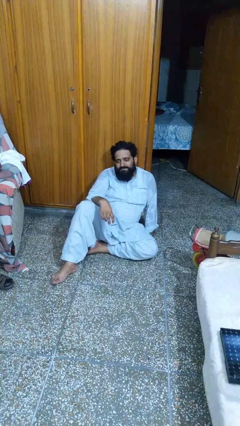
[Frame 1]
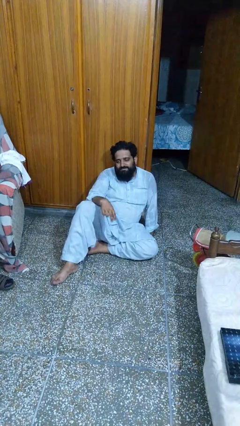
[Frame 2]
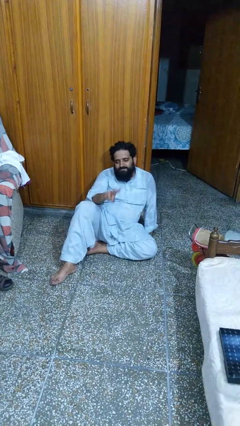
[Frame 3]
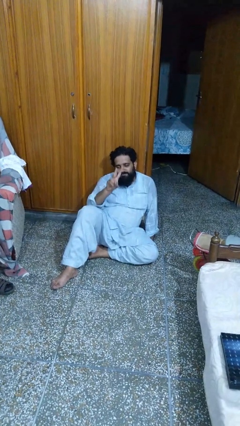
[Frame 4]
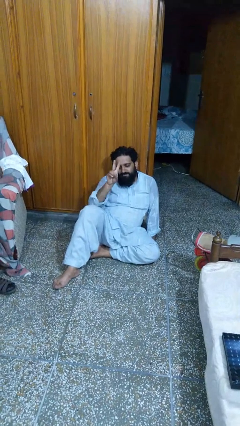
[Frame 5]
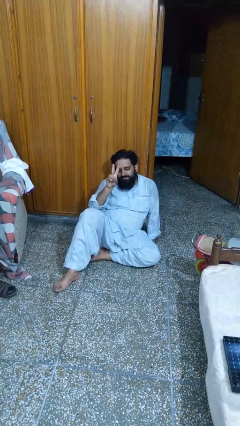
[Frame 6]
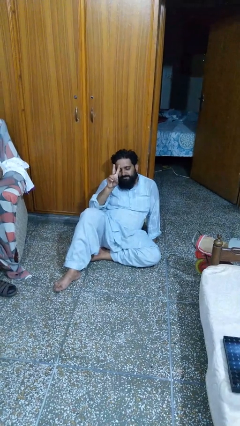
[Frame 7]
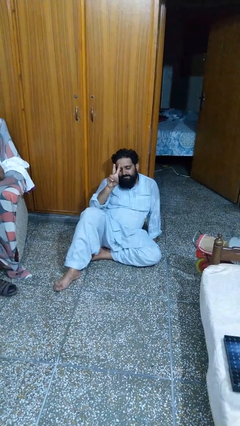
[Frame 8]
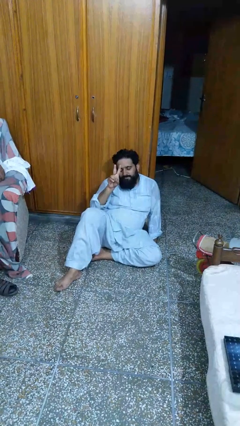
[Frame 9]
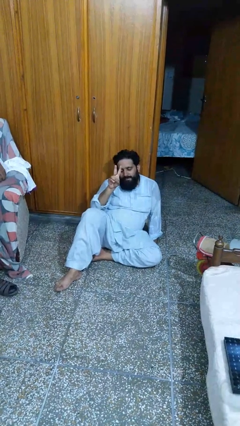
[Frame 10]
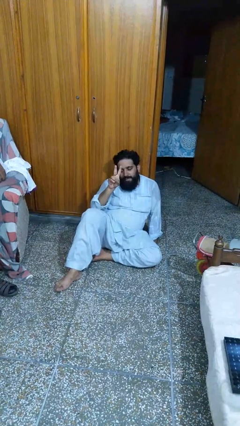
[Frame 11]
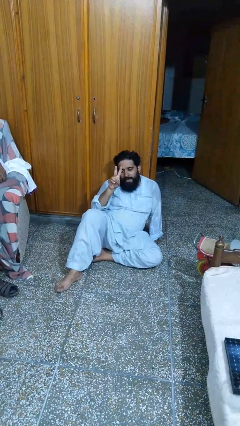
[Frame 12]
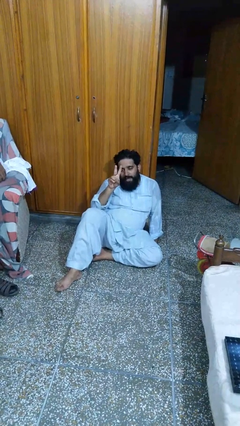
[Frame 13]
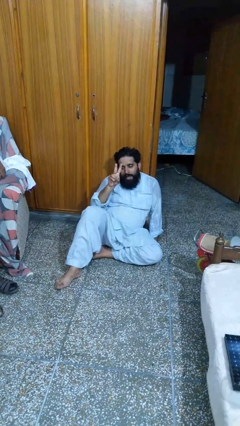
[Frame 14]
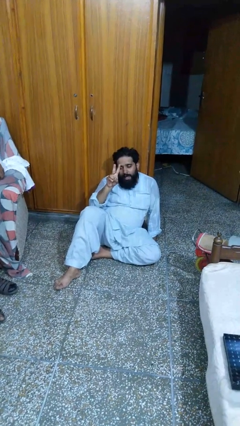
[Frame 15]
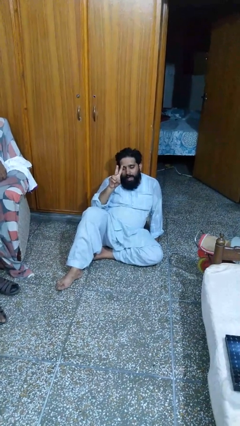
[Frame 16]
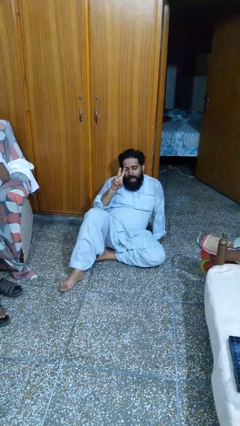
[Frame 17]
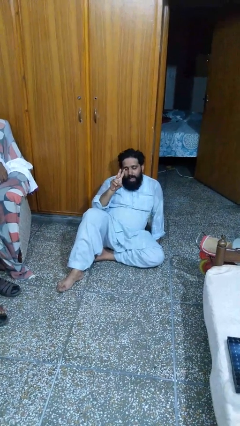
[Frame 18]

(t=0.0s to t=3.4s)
person gestures peace

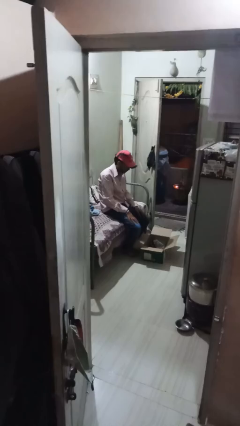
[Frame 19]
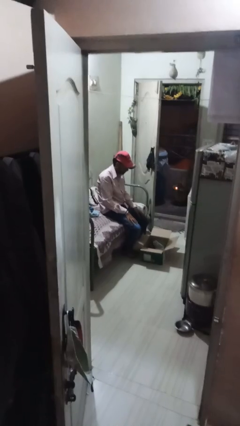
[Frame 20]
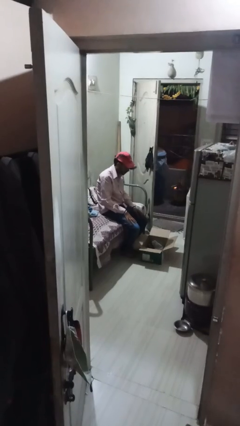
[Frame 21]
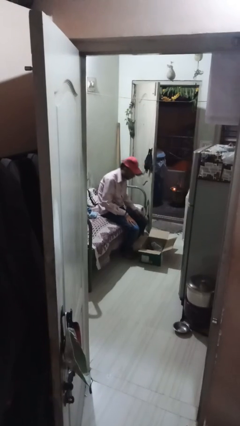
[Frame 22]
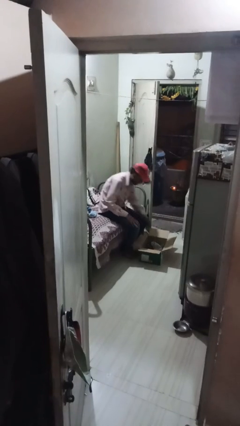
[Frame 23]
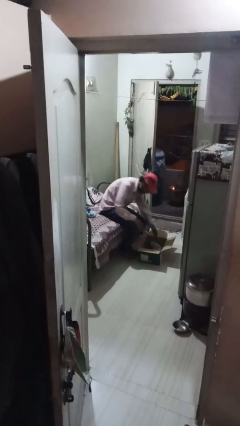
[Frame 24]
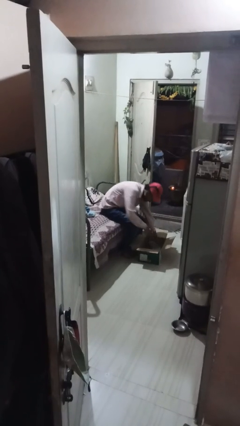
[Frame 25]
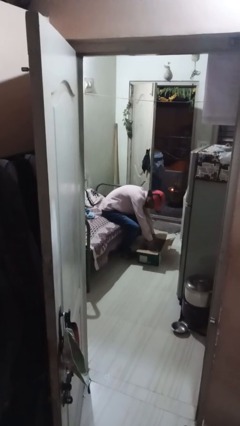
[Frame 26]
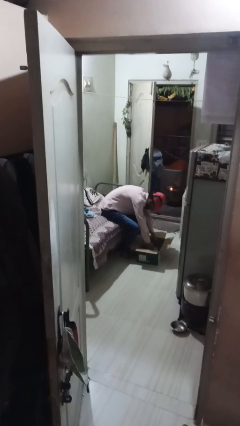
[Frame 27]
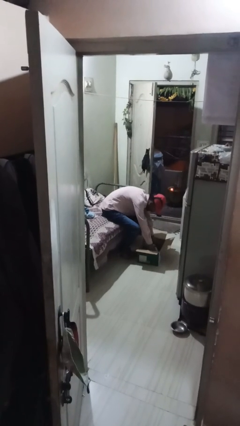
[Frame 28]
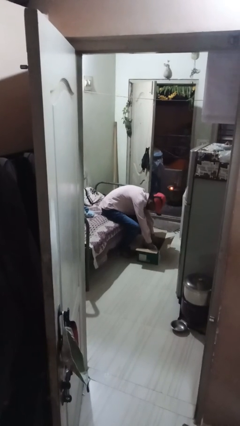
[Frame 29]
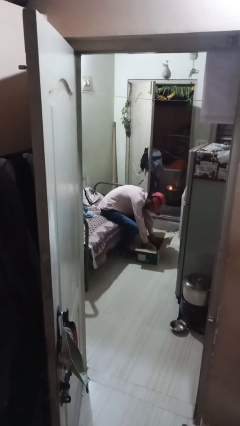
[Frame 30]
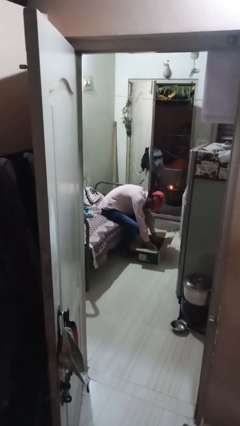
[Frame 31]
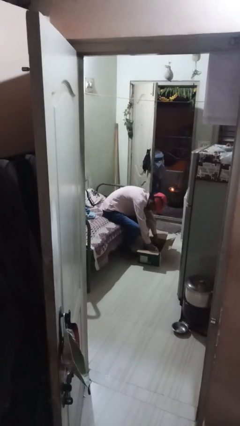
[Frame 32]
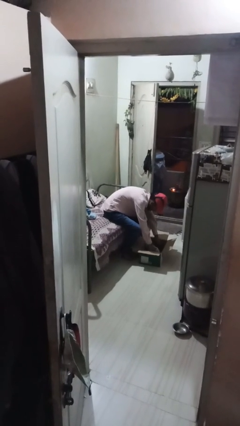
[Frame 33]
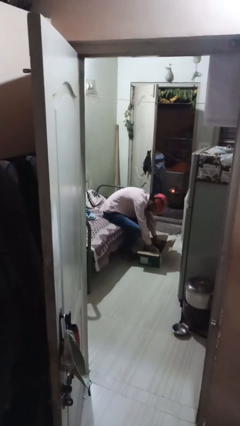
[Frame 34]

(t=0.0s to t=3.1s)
person searches in box

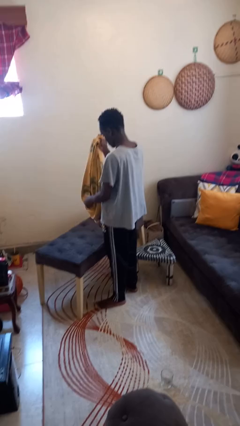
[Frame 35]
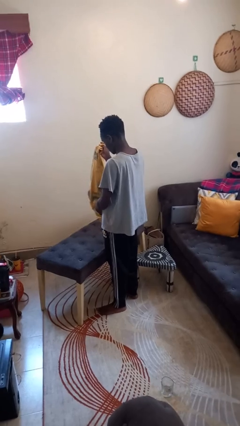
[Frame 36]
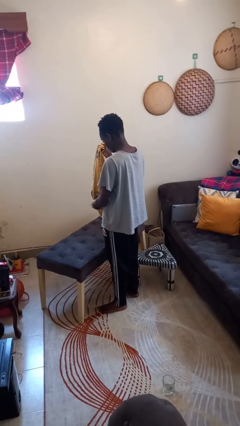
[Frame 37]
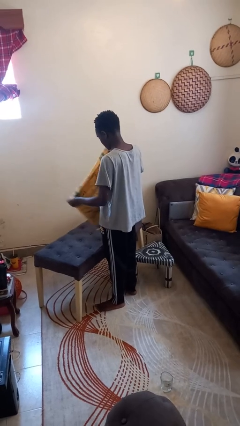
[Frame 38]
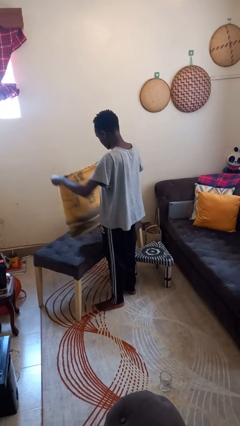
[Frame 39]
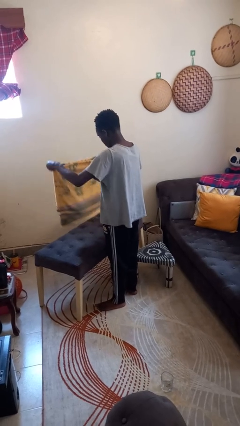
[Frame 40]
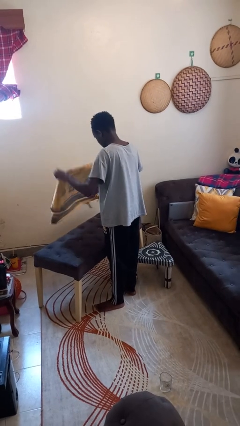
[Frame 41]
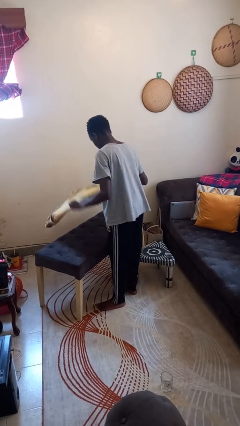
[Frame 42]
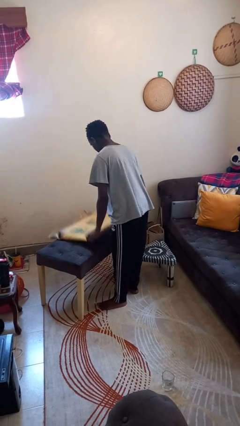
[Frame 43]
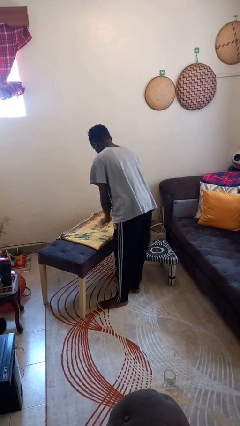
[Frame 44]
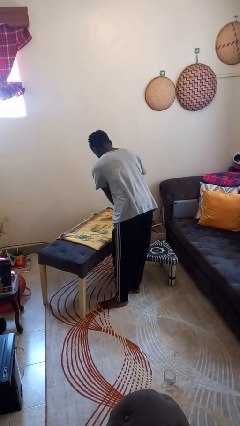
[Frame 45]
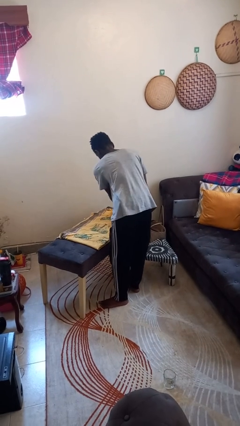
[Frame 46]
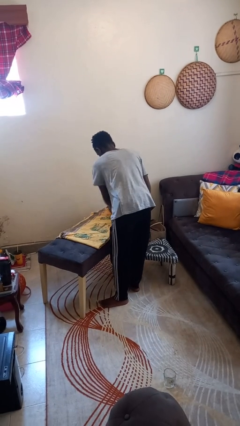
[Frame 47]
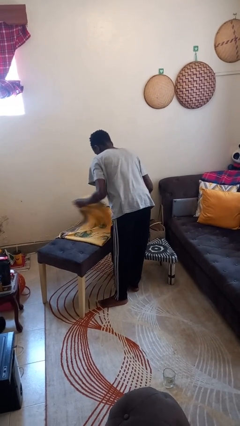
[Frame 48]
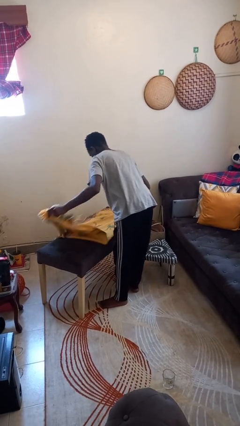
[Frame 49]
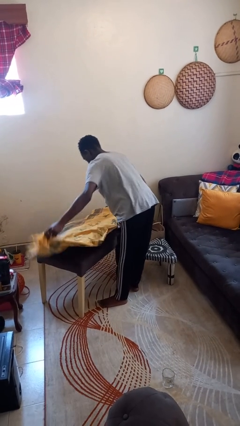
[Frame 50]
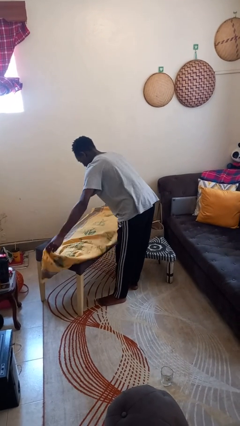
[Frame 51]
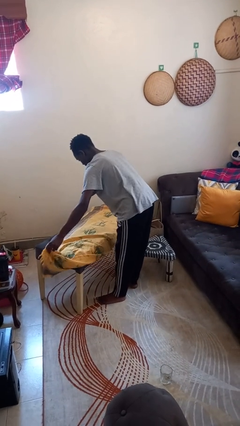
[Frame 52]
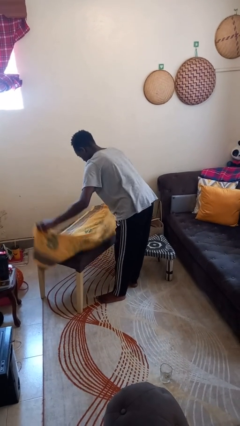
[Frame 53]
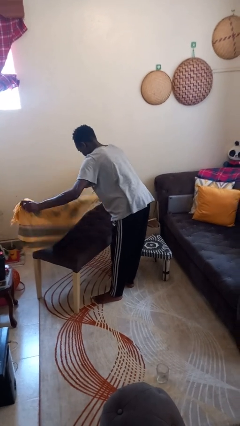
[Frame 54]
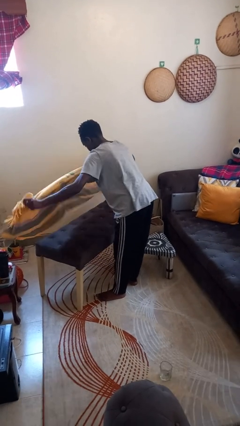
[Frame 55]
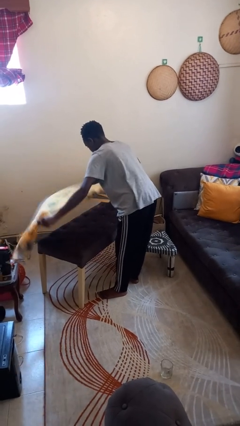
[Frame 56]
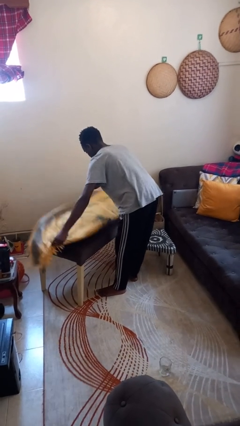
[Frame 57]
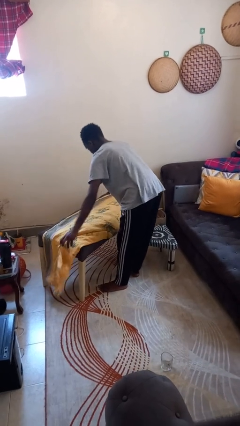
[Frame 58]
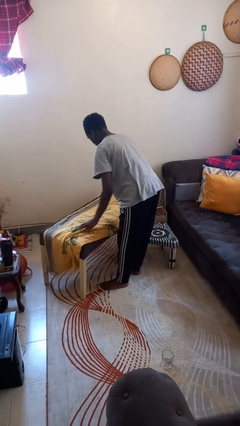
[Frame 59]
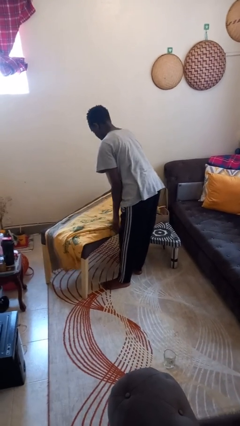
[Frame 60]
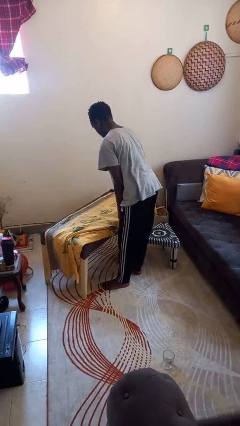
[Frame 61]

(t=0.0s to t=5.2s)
person spreads tablecloth

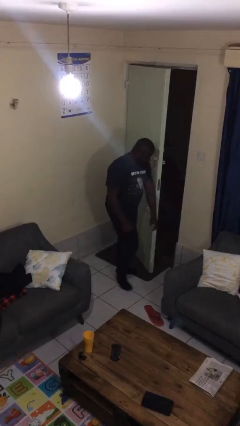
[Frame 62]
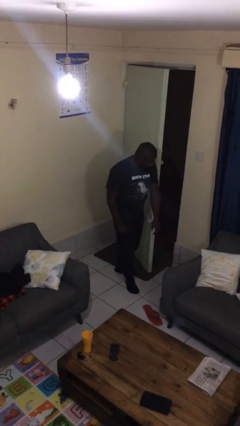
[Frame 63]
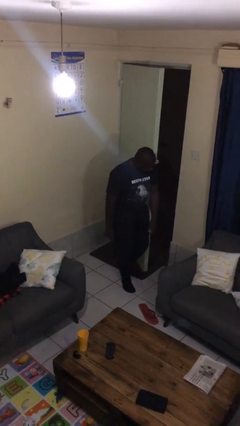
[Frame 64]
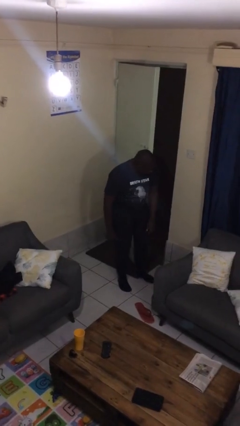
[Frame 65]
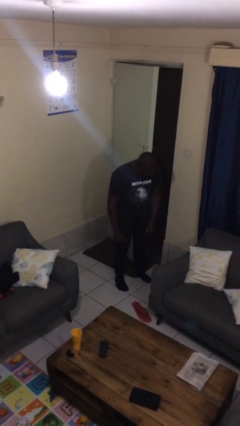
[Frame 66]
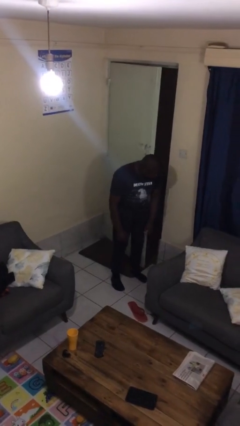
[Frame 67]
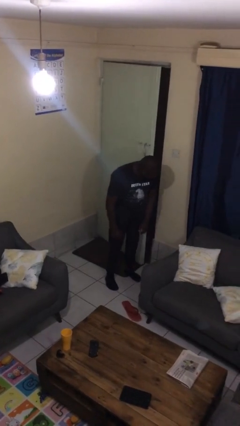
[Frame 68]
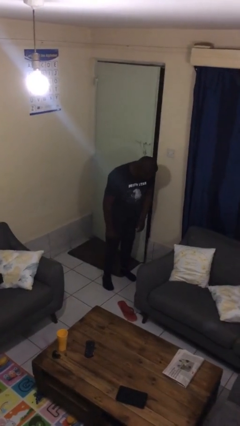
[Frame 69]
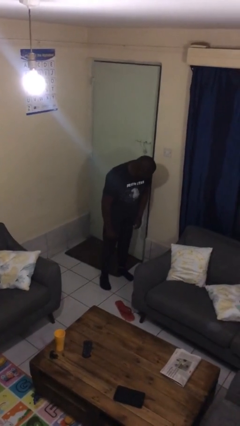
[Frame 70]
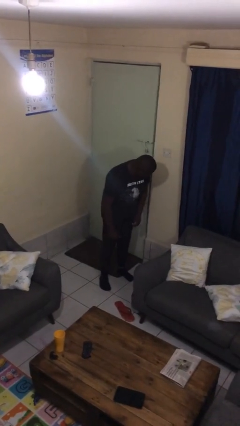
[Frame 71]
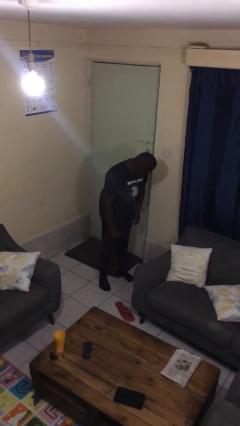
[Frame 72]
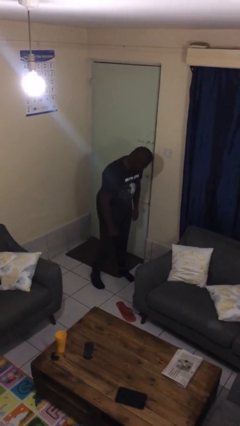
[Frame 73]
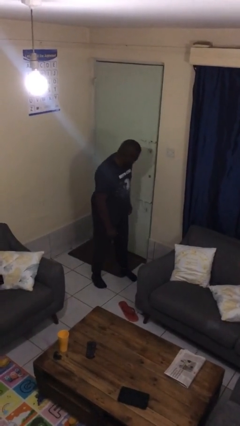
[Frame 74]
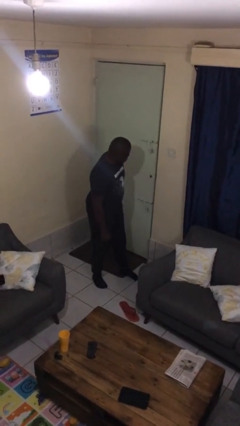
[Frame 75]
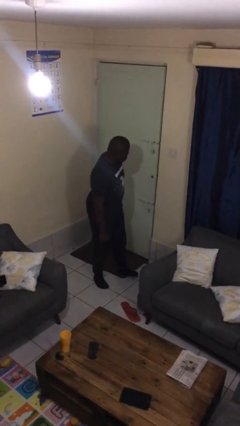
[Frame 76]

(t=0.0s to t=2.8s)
person closes door with hip

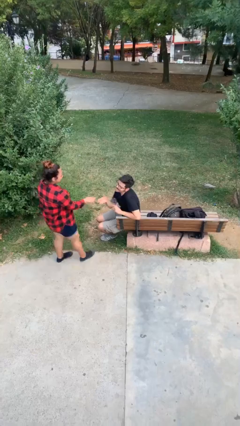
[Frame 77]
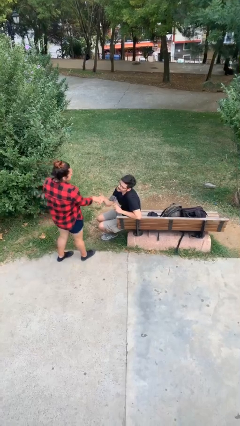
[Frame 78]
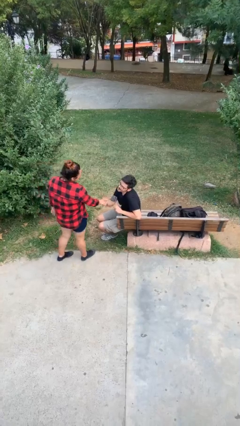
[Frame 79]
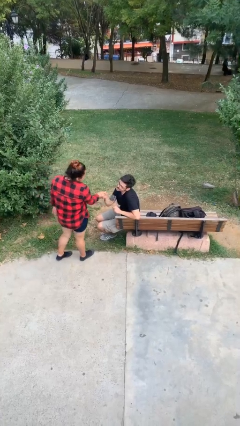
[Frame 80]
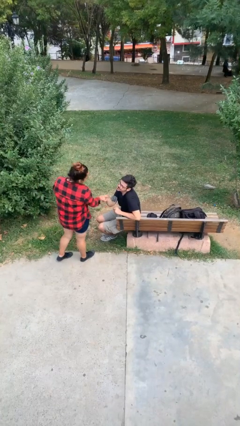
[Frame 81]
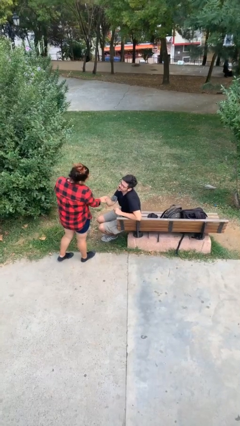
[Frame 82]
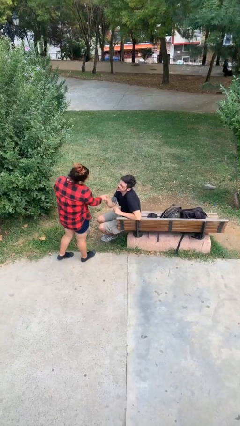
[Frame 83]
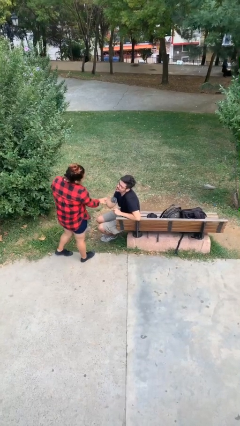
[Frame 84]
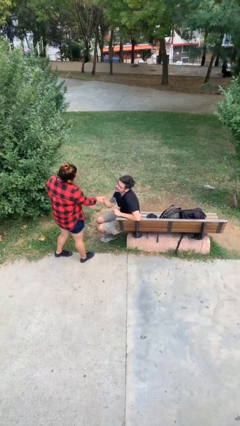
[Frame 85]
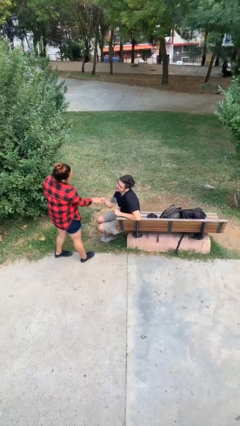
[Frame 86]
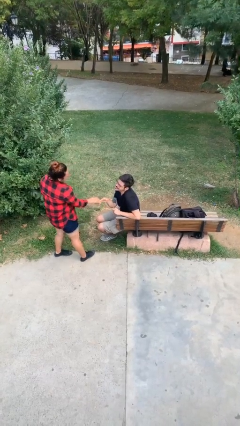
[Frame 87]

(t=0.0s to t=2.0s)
person shakes hand

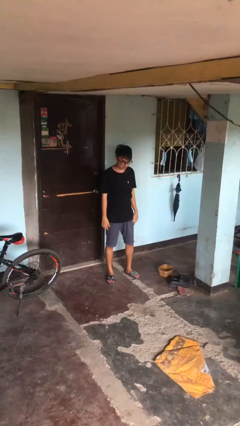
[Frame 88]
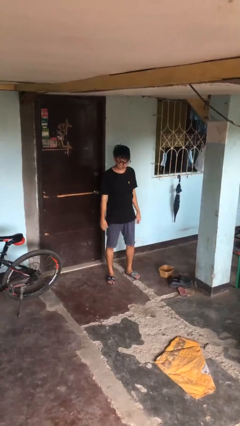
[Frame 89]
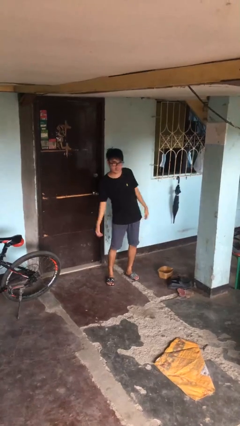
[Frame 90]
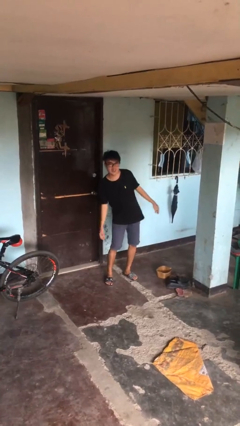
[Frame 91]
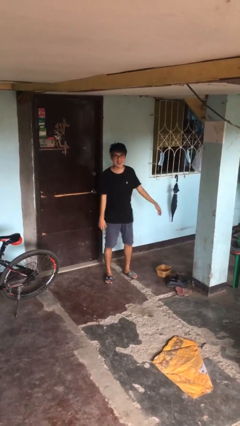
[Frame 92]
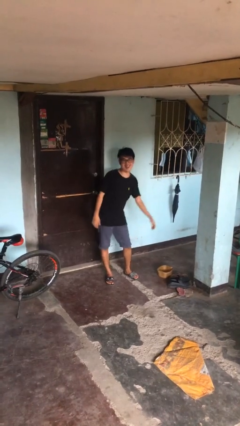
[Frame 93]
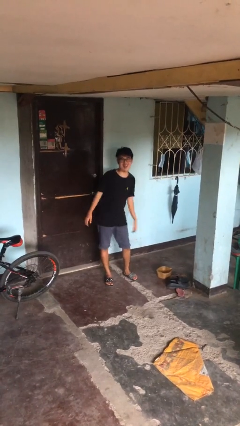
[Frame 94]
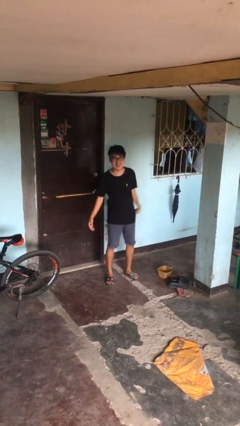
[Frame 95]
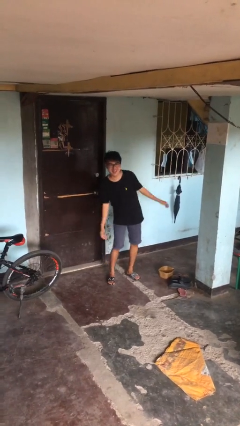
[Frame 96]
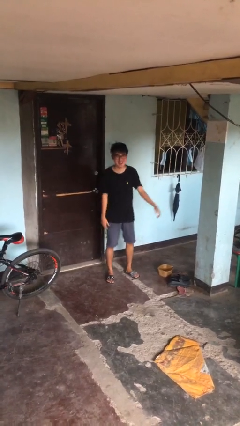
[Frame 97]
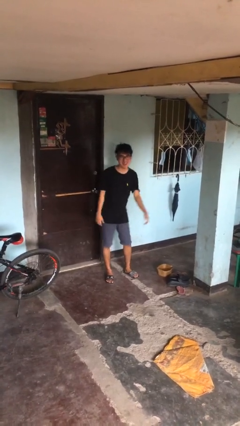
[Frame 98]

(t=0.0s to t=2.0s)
person wiggles hips
